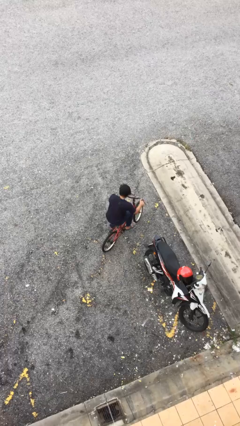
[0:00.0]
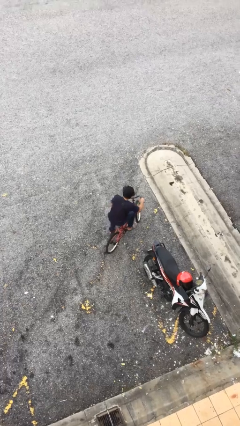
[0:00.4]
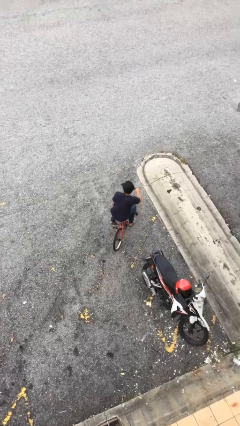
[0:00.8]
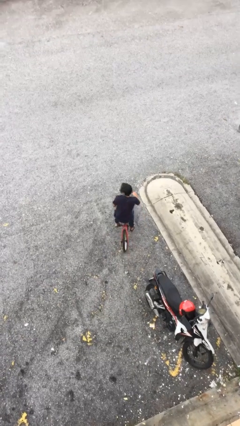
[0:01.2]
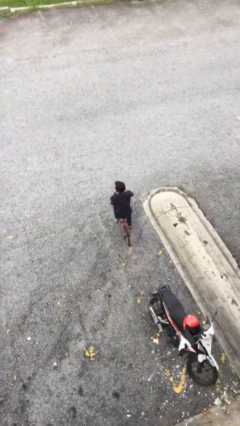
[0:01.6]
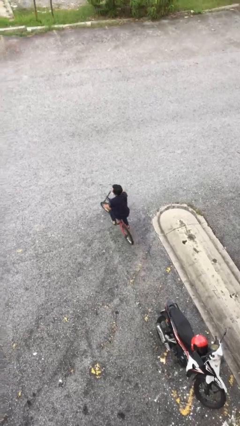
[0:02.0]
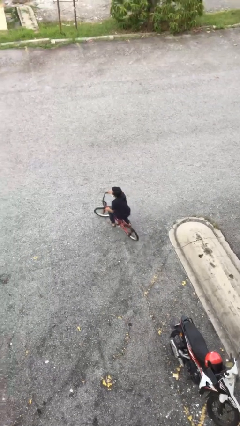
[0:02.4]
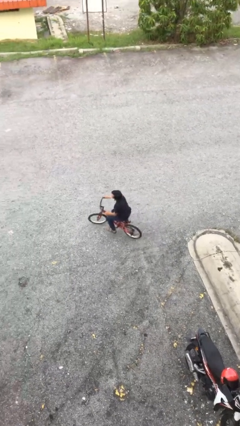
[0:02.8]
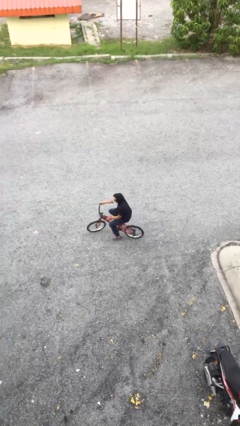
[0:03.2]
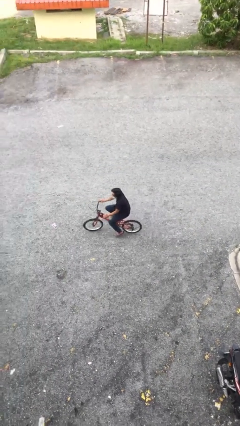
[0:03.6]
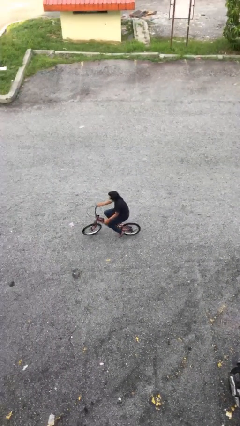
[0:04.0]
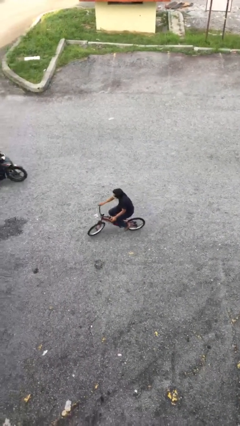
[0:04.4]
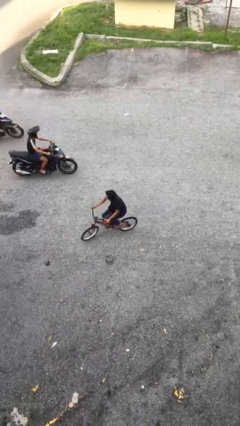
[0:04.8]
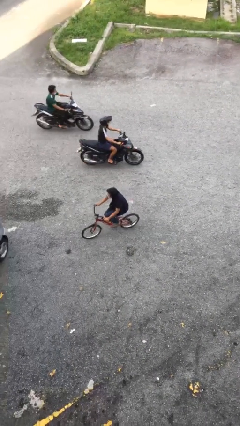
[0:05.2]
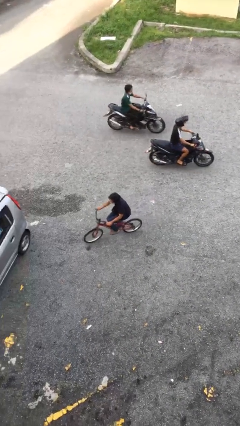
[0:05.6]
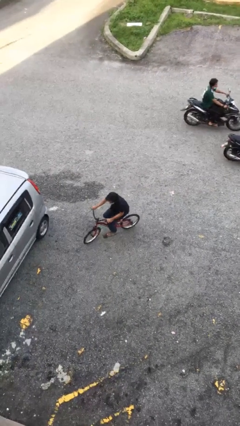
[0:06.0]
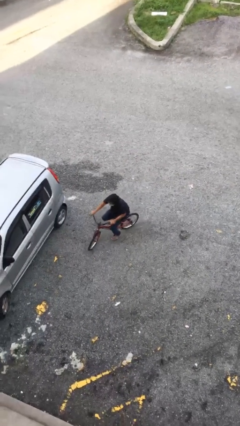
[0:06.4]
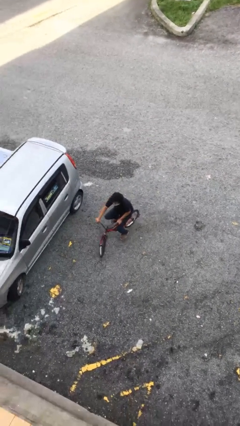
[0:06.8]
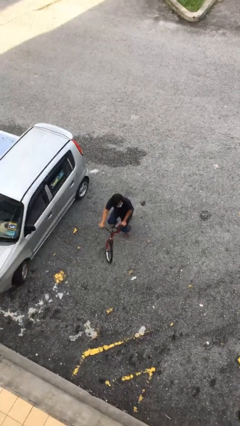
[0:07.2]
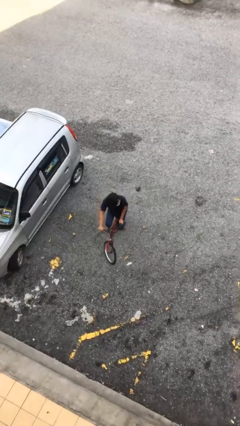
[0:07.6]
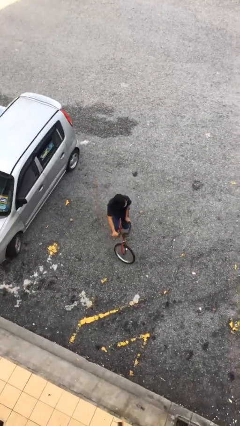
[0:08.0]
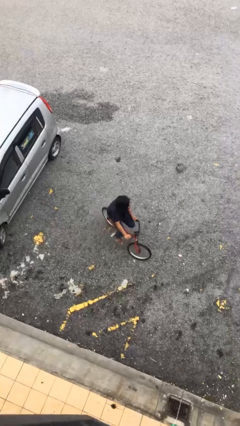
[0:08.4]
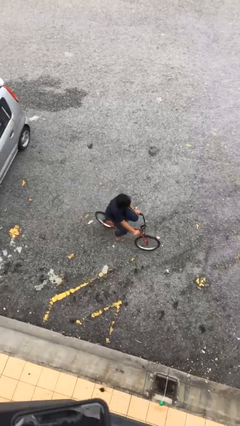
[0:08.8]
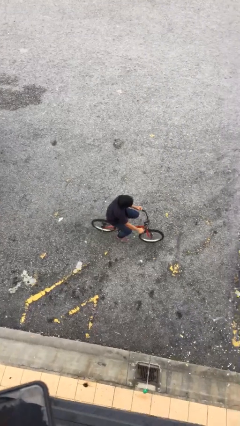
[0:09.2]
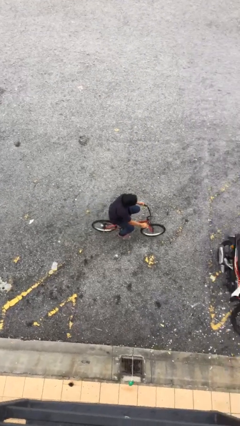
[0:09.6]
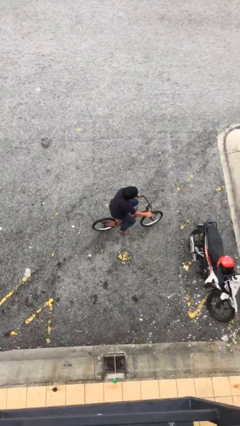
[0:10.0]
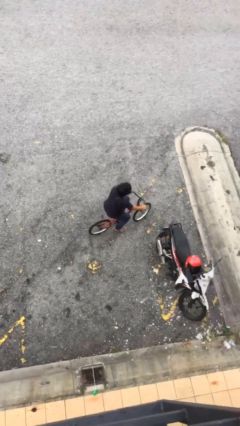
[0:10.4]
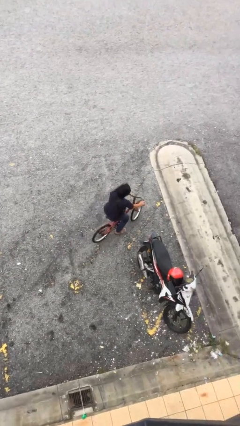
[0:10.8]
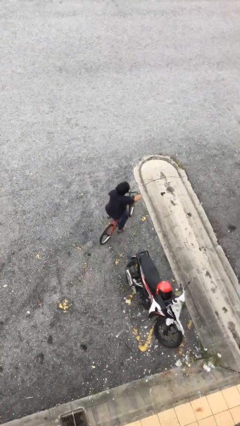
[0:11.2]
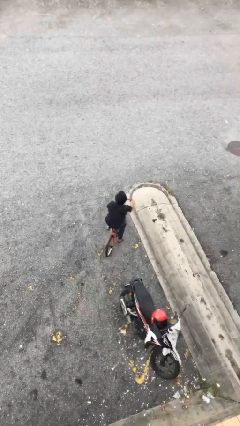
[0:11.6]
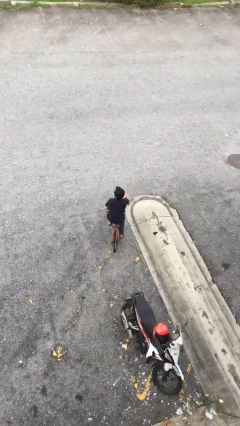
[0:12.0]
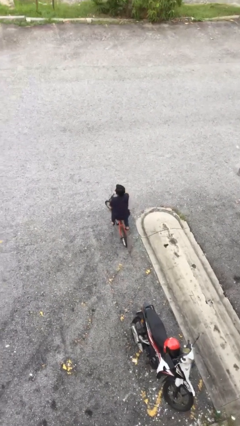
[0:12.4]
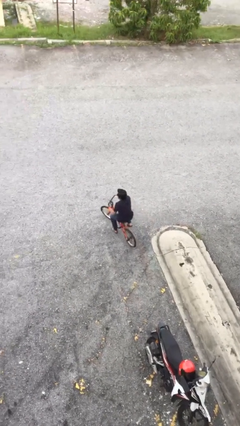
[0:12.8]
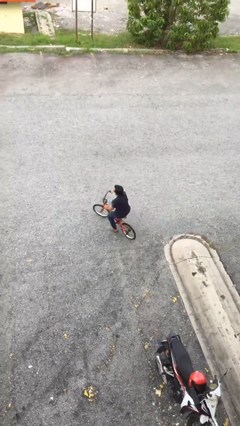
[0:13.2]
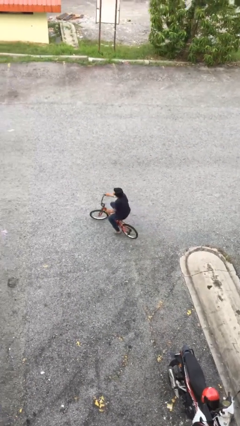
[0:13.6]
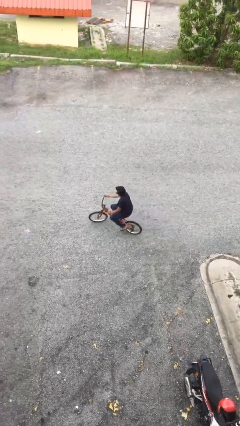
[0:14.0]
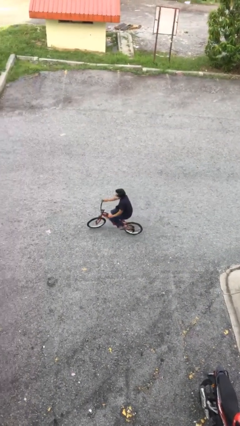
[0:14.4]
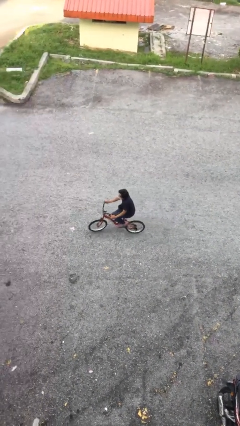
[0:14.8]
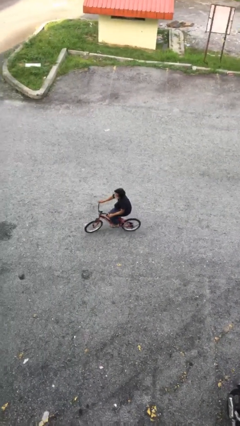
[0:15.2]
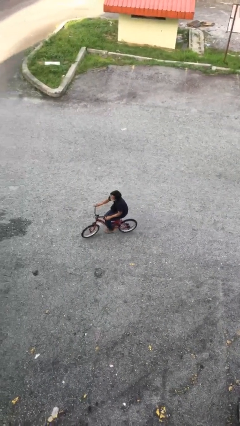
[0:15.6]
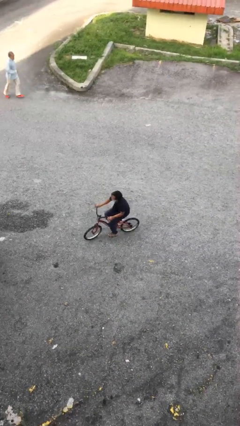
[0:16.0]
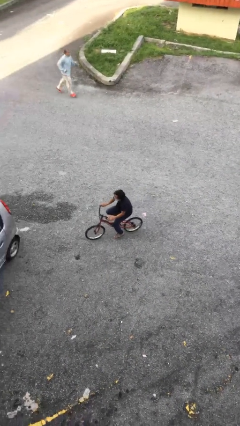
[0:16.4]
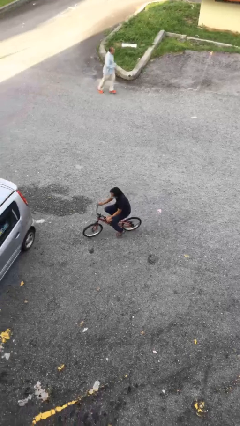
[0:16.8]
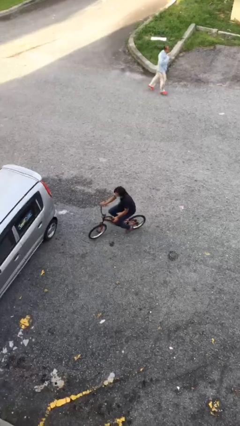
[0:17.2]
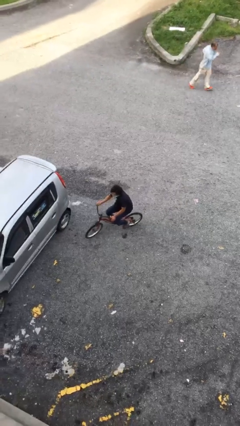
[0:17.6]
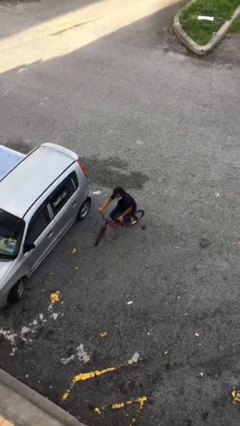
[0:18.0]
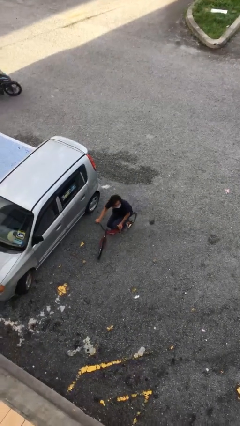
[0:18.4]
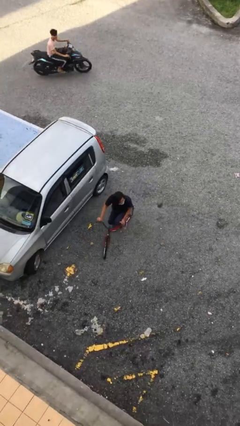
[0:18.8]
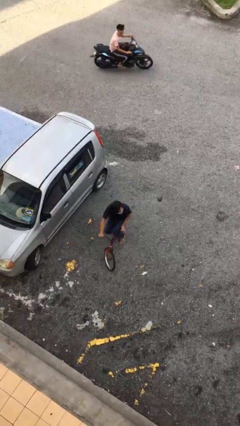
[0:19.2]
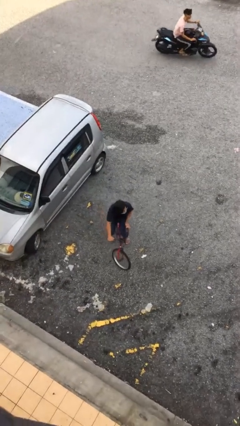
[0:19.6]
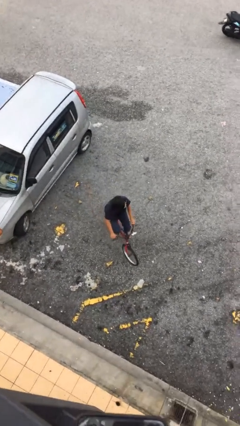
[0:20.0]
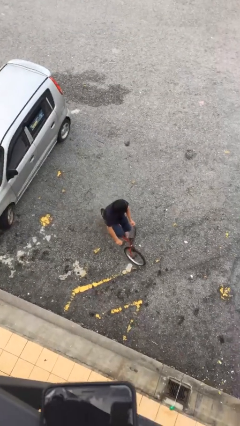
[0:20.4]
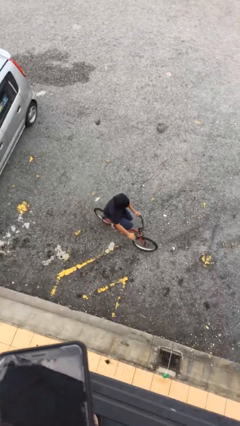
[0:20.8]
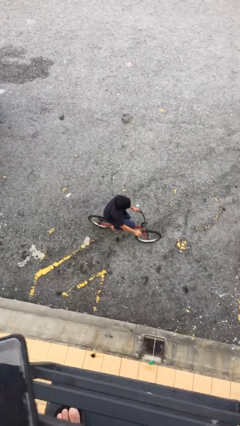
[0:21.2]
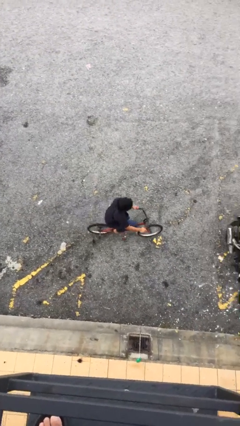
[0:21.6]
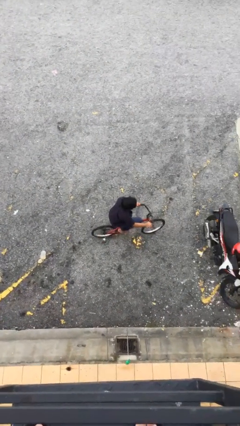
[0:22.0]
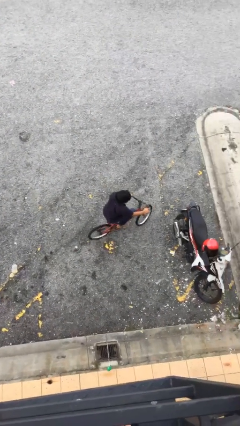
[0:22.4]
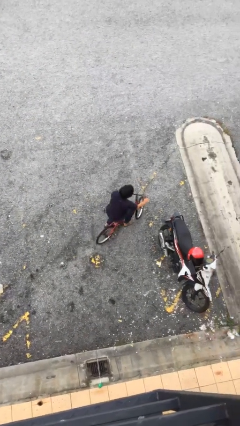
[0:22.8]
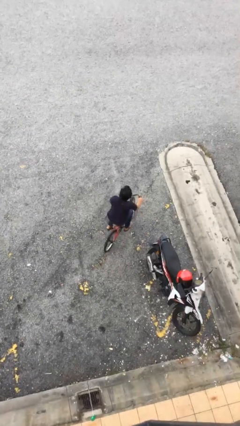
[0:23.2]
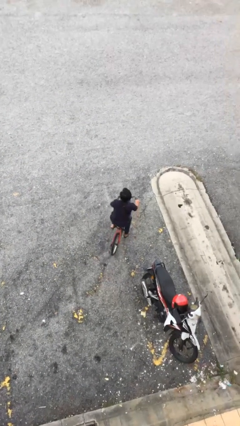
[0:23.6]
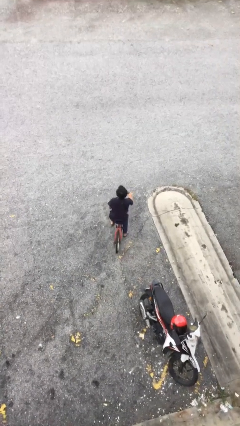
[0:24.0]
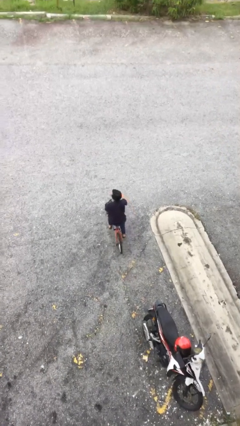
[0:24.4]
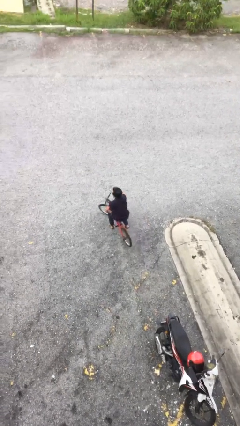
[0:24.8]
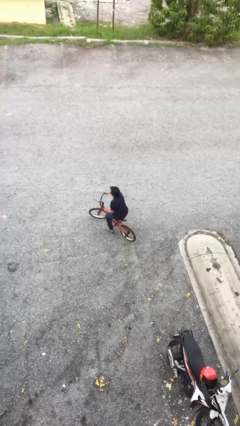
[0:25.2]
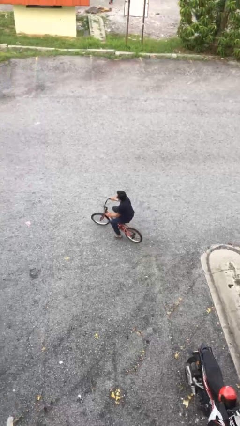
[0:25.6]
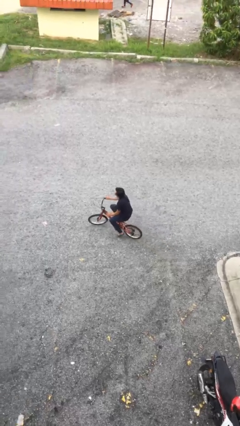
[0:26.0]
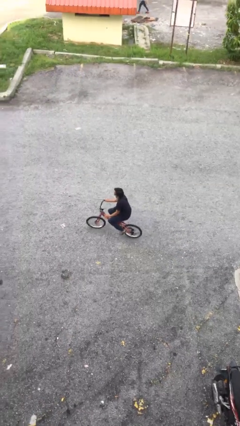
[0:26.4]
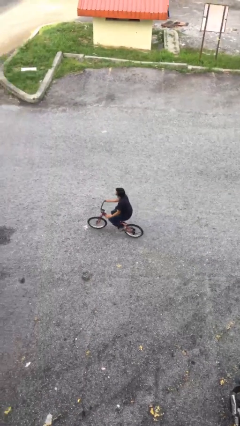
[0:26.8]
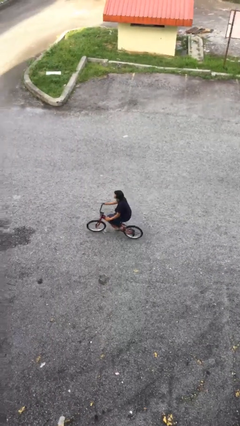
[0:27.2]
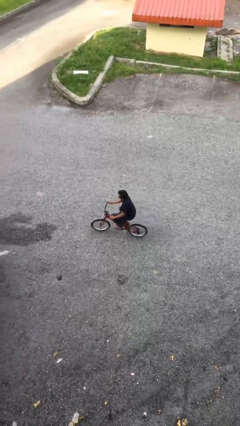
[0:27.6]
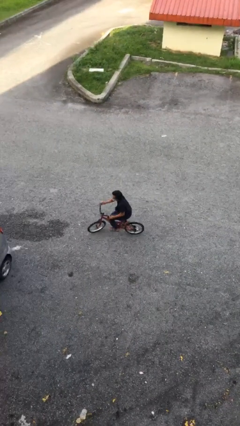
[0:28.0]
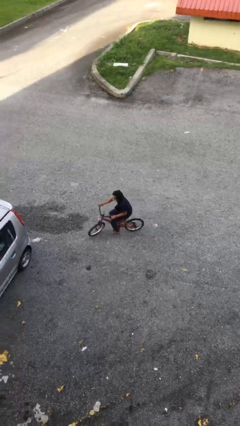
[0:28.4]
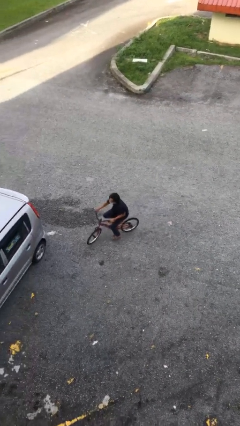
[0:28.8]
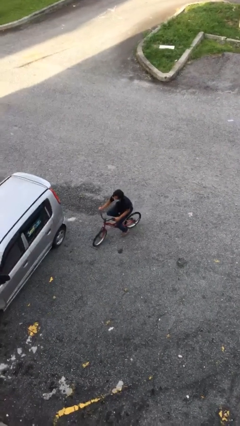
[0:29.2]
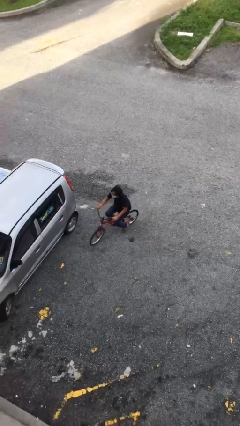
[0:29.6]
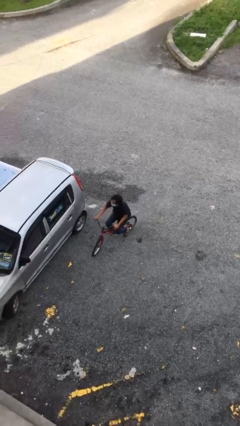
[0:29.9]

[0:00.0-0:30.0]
person rides bicycle

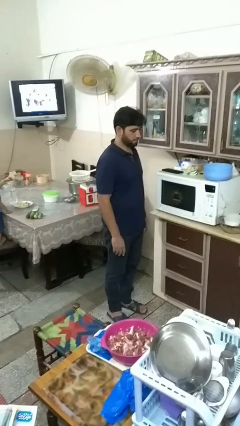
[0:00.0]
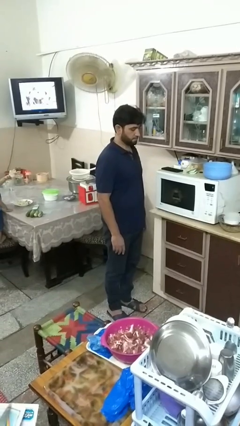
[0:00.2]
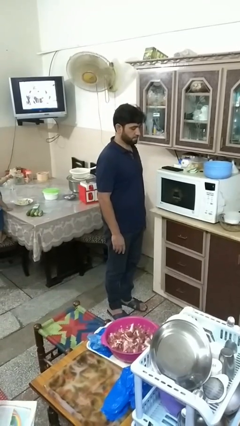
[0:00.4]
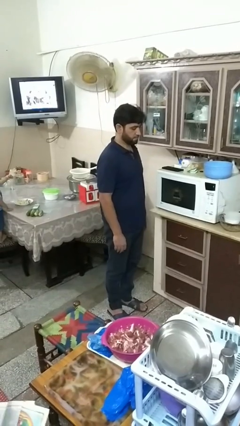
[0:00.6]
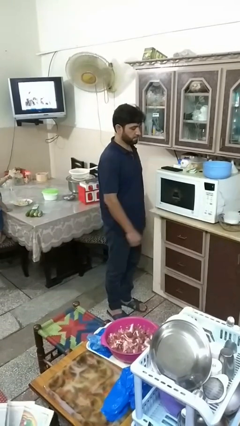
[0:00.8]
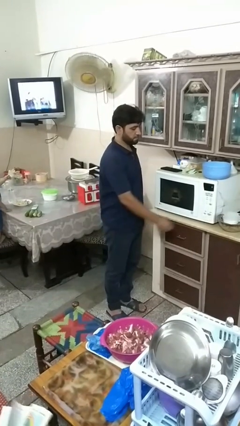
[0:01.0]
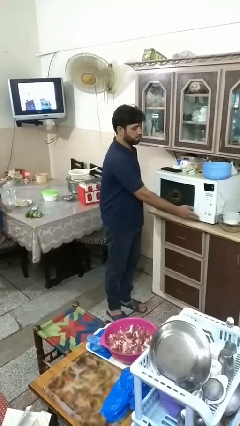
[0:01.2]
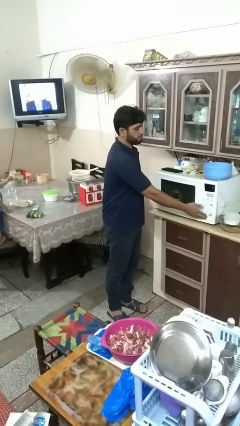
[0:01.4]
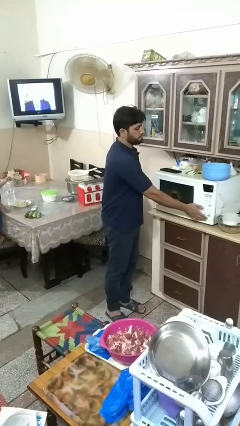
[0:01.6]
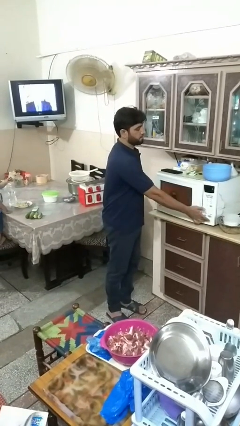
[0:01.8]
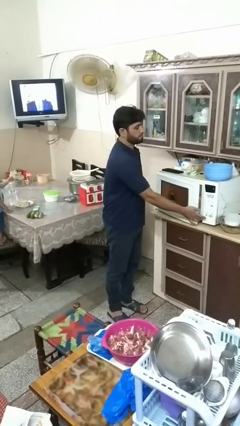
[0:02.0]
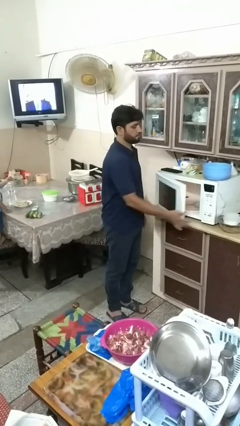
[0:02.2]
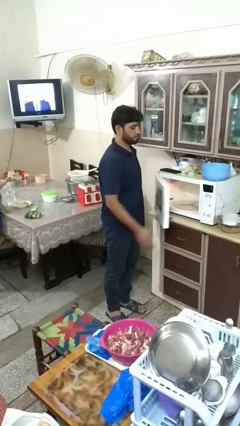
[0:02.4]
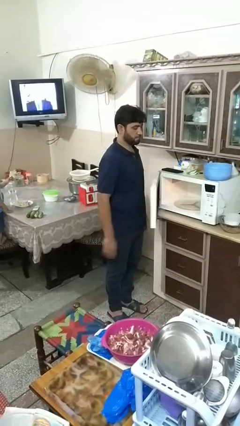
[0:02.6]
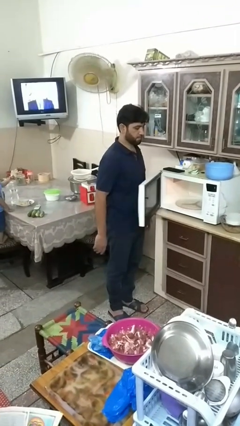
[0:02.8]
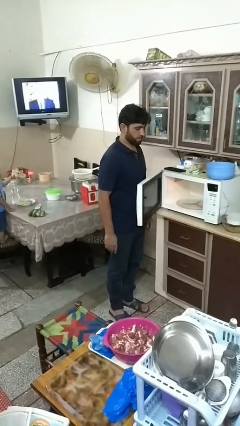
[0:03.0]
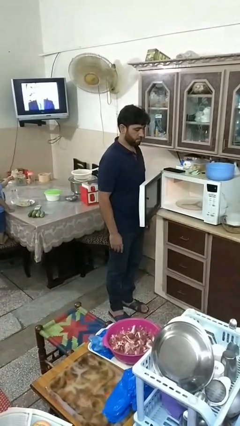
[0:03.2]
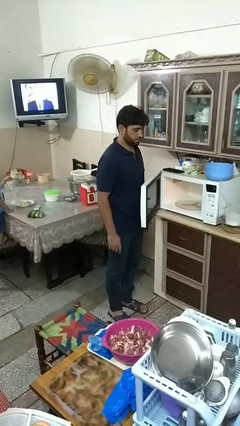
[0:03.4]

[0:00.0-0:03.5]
person opens oven door
